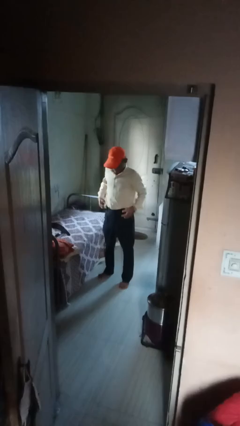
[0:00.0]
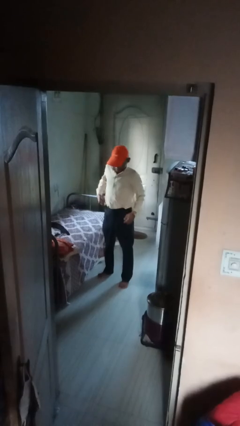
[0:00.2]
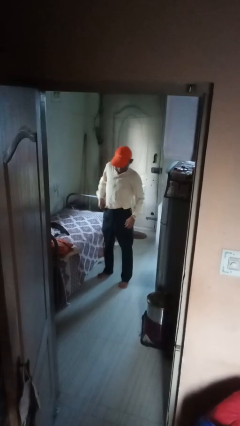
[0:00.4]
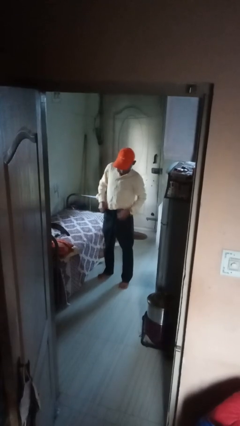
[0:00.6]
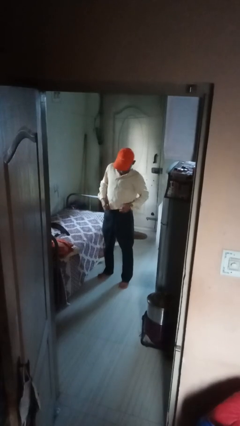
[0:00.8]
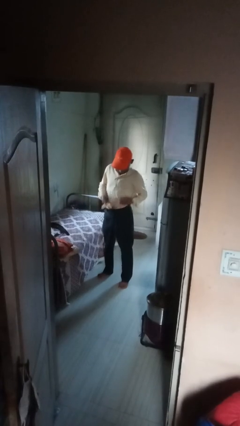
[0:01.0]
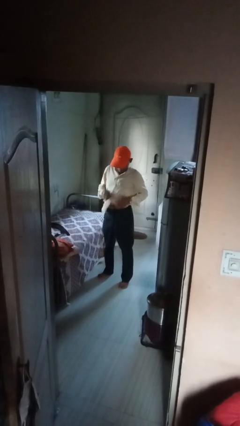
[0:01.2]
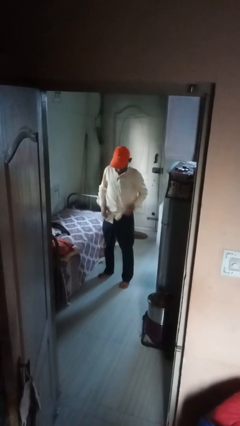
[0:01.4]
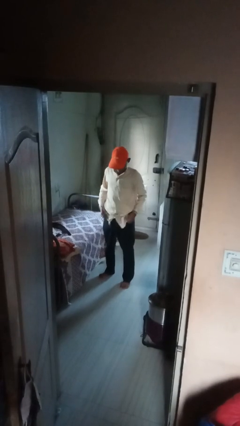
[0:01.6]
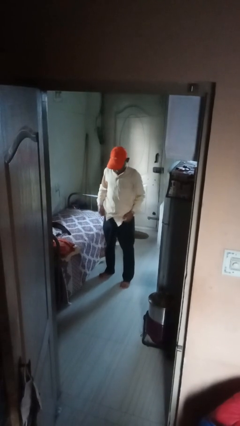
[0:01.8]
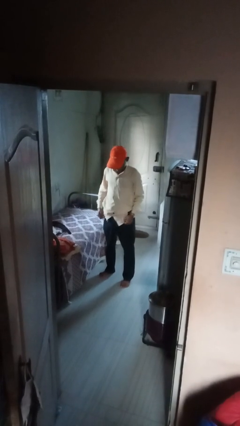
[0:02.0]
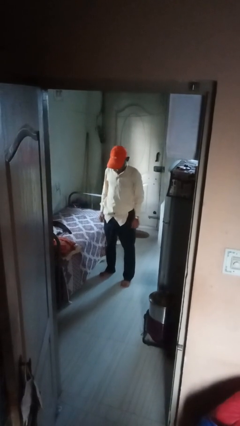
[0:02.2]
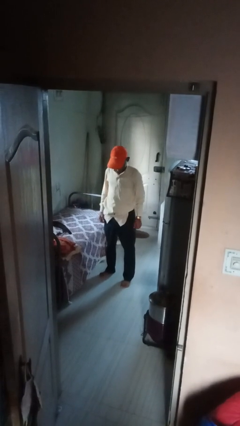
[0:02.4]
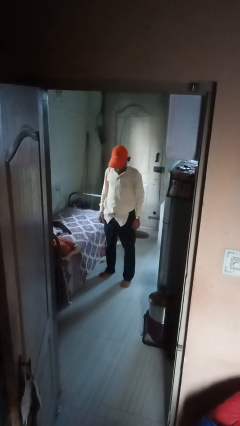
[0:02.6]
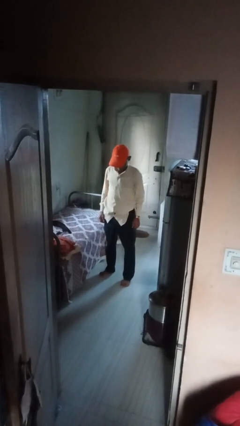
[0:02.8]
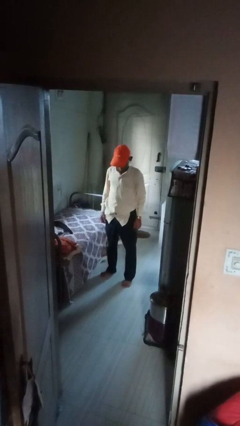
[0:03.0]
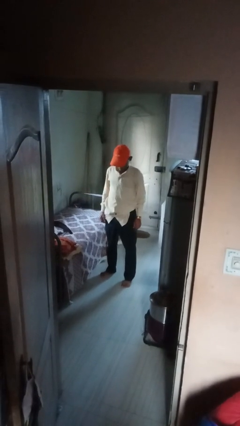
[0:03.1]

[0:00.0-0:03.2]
person untucks shirt

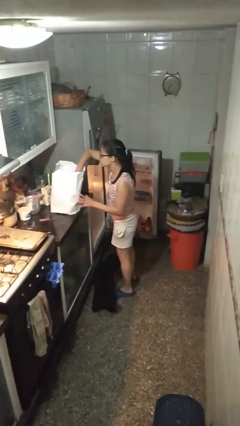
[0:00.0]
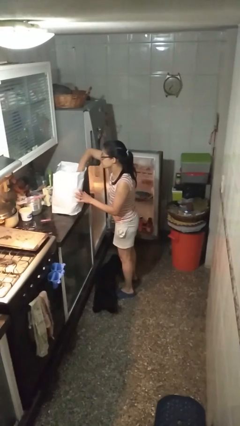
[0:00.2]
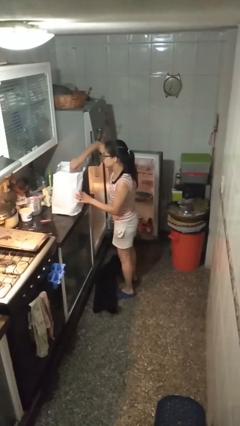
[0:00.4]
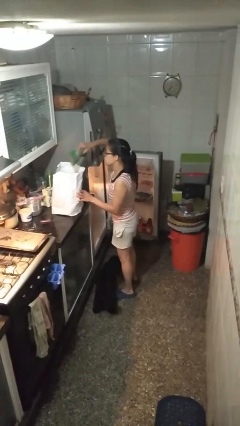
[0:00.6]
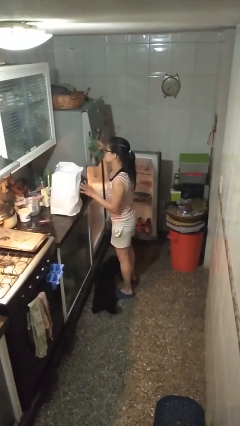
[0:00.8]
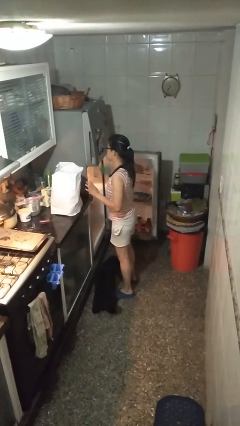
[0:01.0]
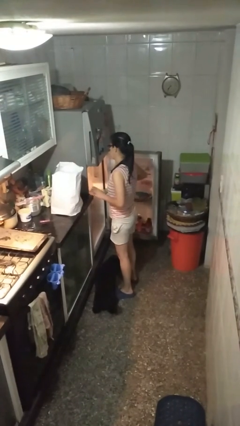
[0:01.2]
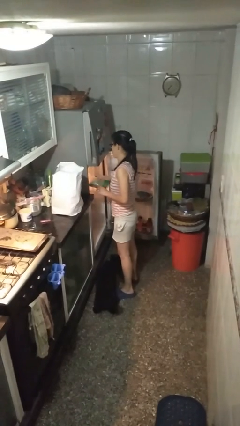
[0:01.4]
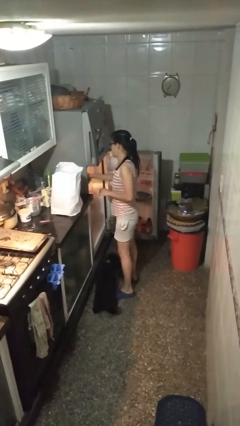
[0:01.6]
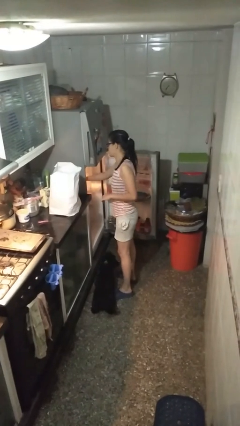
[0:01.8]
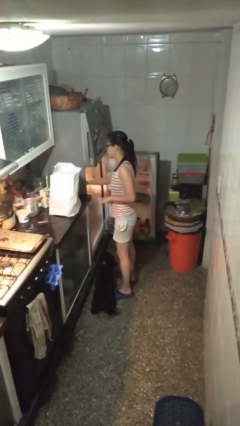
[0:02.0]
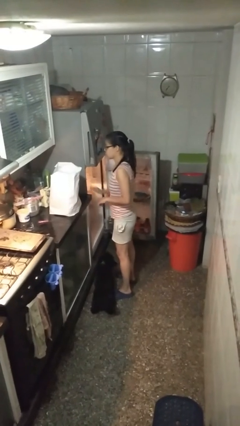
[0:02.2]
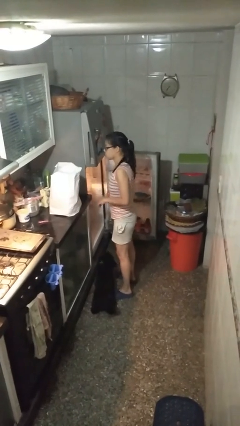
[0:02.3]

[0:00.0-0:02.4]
person loads groceries into refrigerator

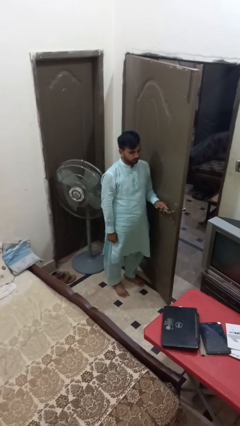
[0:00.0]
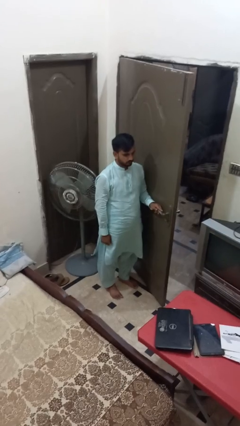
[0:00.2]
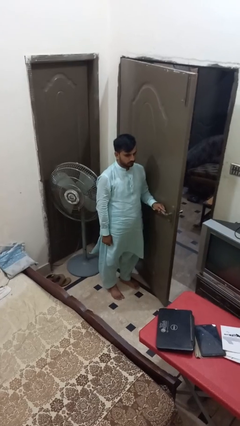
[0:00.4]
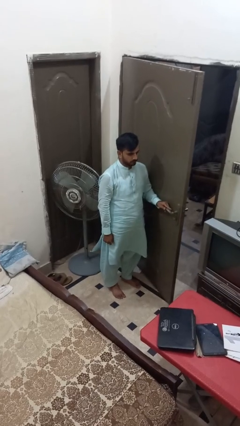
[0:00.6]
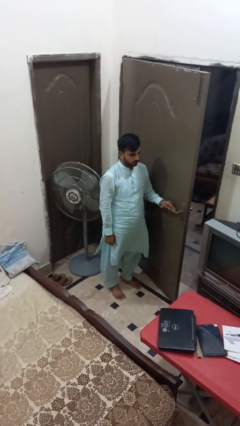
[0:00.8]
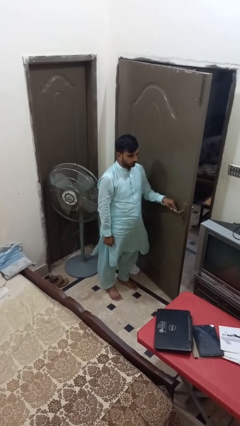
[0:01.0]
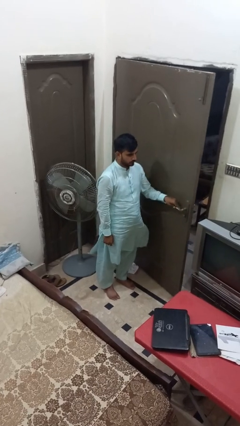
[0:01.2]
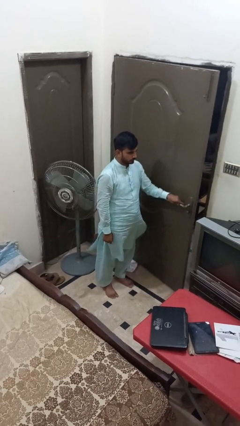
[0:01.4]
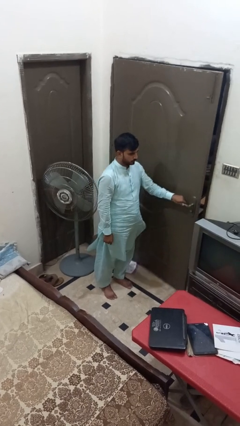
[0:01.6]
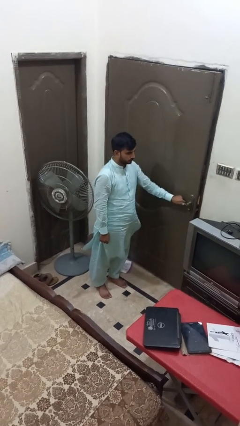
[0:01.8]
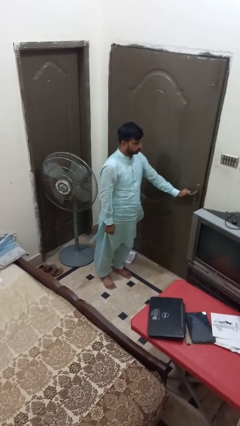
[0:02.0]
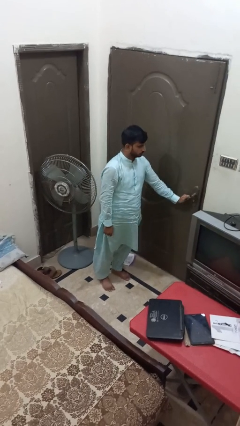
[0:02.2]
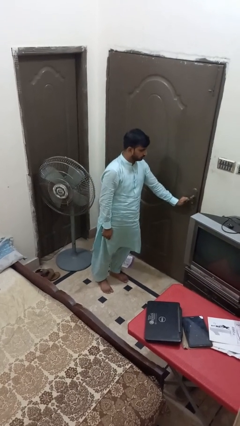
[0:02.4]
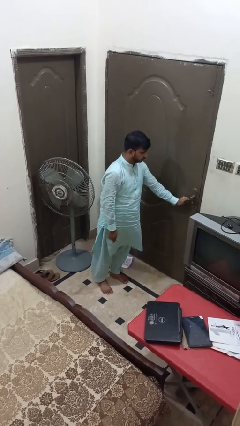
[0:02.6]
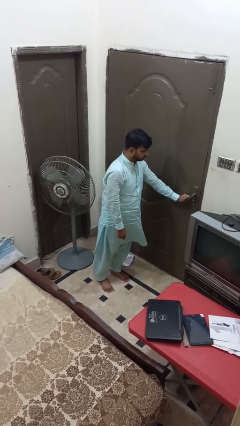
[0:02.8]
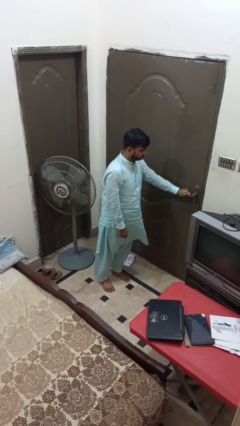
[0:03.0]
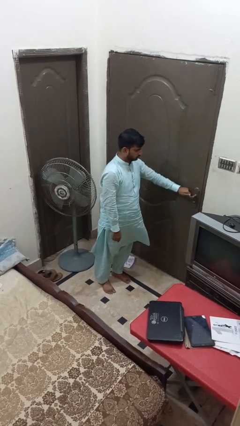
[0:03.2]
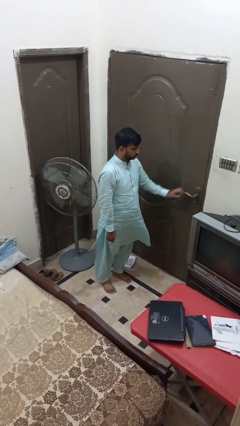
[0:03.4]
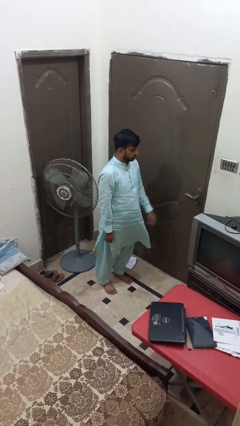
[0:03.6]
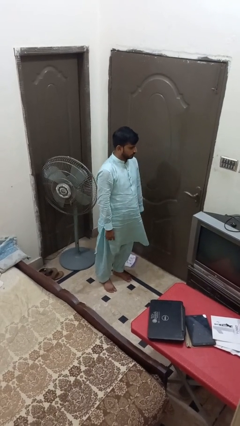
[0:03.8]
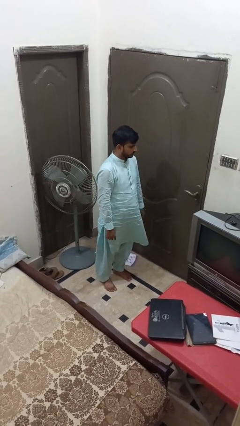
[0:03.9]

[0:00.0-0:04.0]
person closes facility door

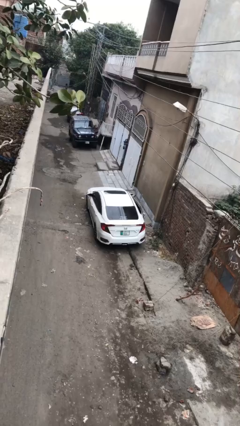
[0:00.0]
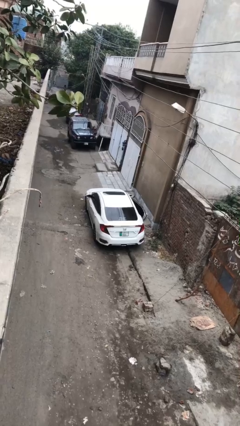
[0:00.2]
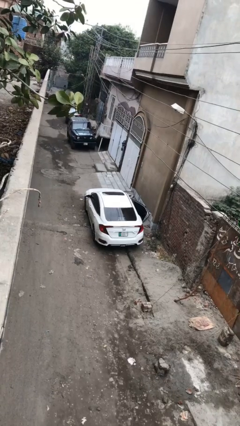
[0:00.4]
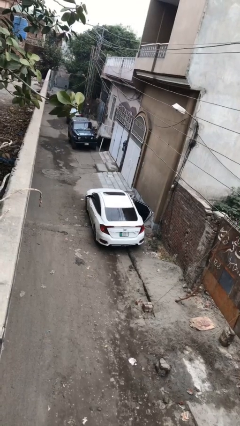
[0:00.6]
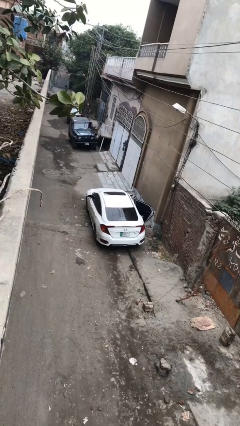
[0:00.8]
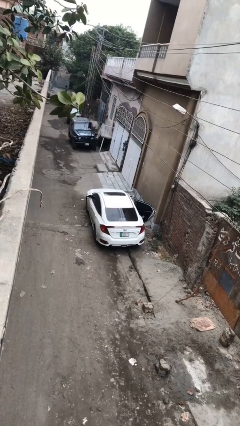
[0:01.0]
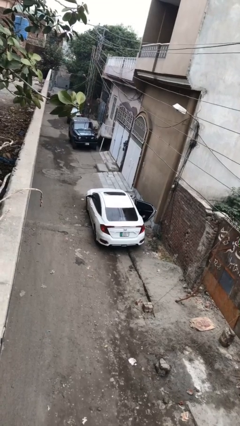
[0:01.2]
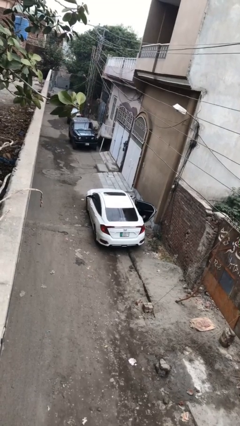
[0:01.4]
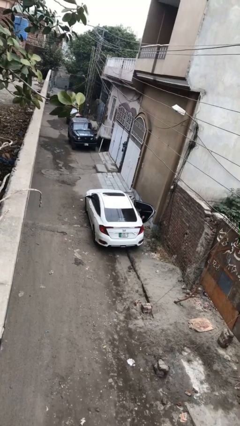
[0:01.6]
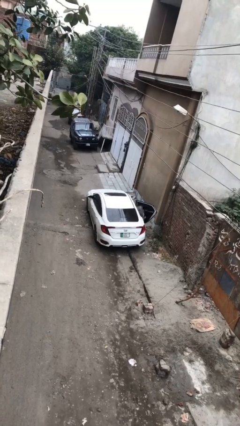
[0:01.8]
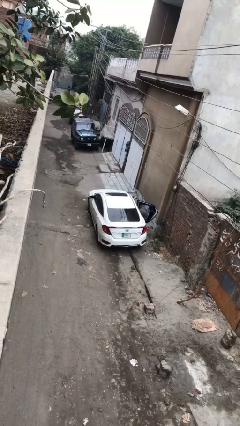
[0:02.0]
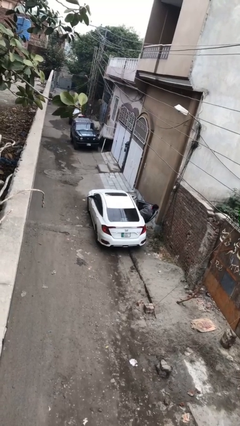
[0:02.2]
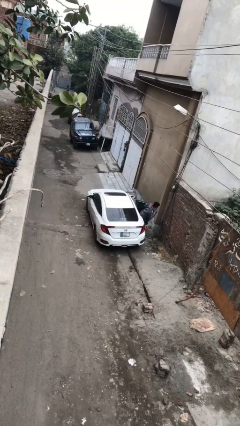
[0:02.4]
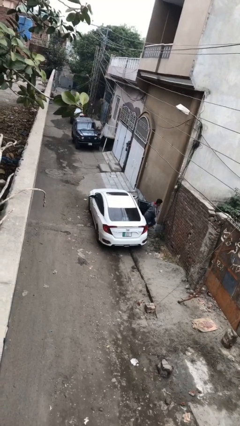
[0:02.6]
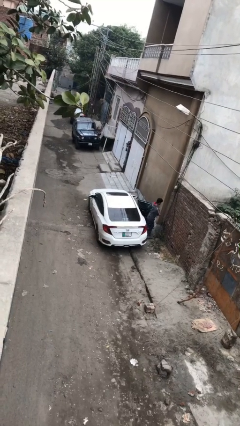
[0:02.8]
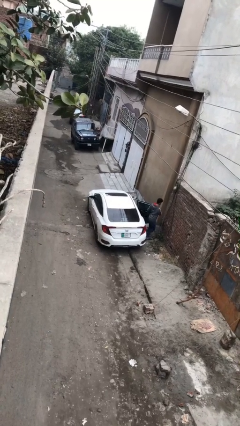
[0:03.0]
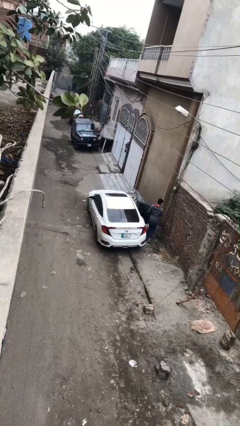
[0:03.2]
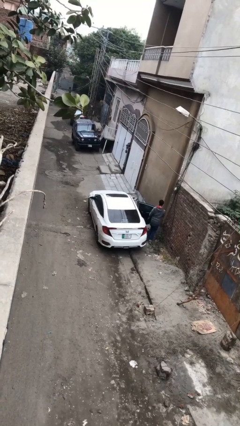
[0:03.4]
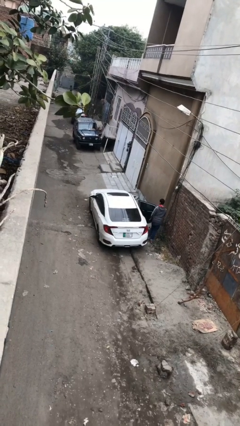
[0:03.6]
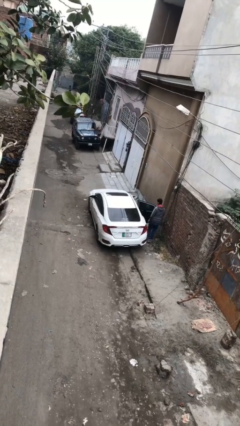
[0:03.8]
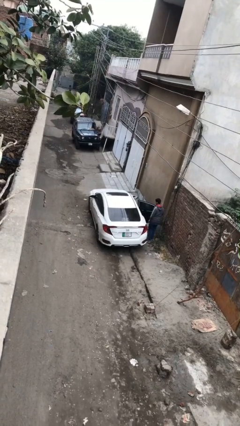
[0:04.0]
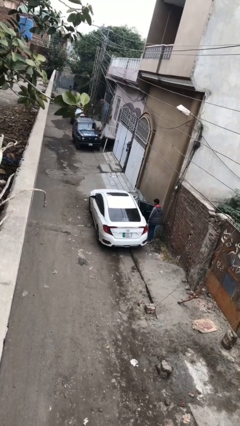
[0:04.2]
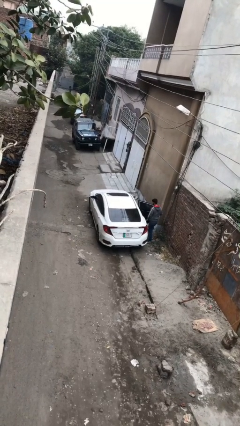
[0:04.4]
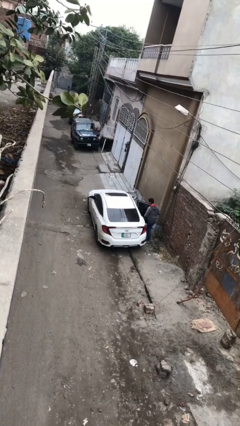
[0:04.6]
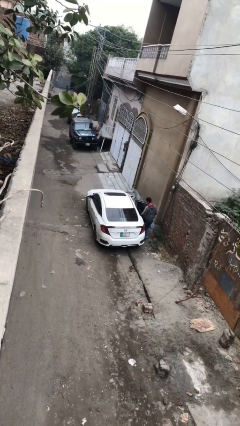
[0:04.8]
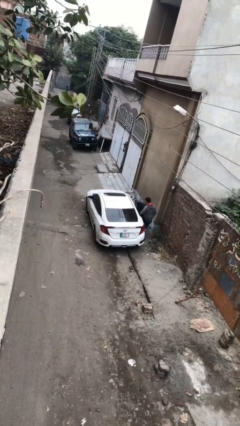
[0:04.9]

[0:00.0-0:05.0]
car drops off person

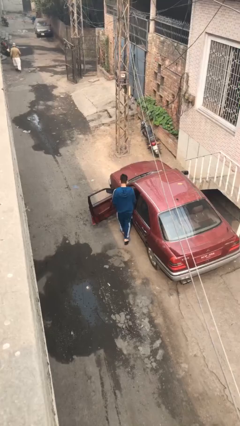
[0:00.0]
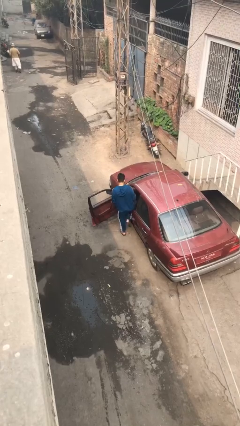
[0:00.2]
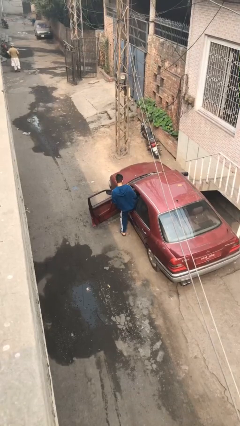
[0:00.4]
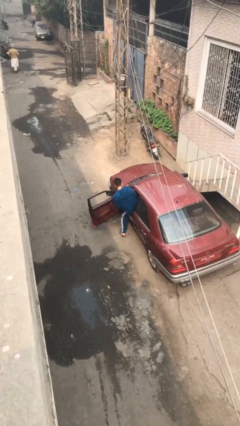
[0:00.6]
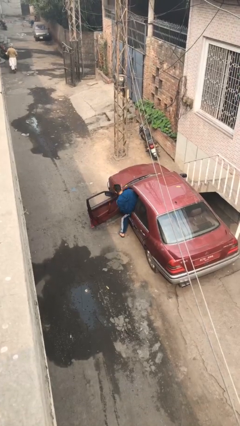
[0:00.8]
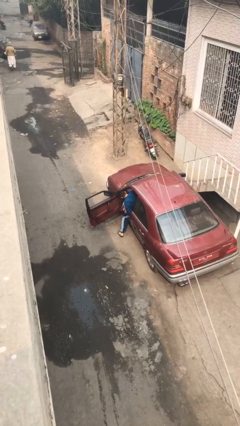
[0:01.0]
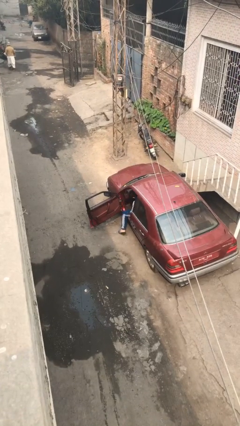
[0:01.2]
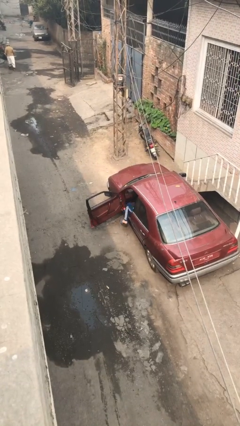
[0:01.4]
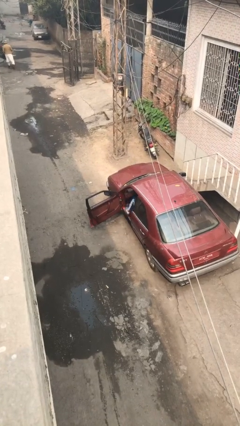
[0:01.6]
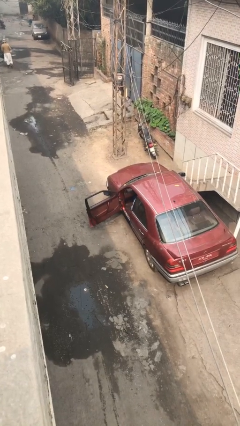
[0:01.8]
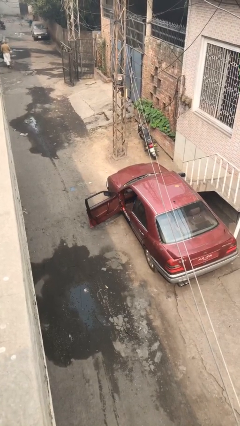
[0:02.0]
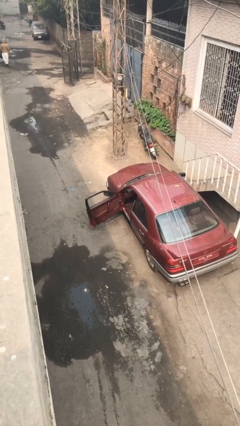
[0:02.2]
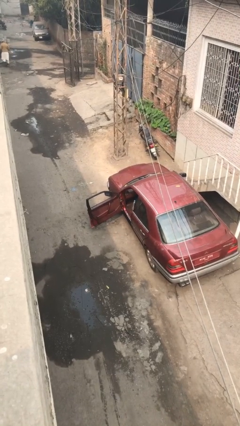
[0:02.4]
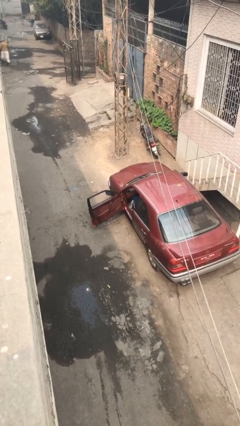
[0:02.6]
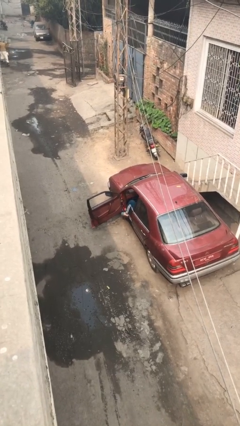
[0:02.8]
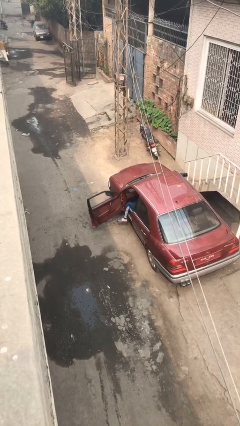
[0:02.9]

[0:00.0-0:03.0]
person enters car
